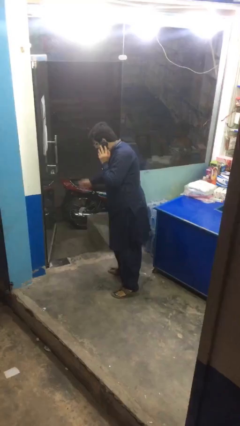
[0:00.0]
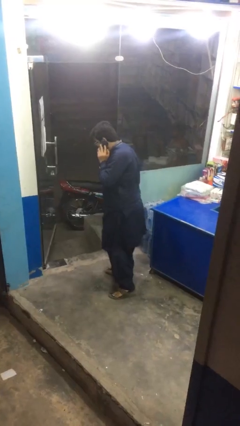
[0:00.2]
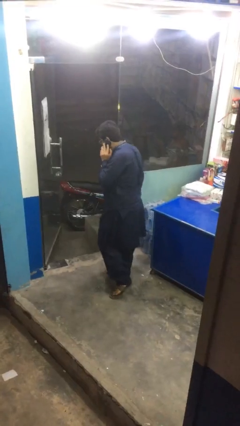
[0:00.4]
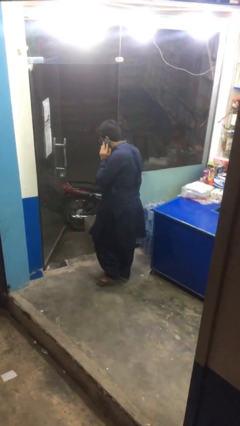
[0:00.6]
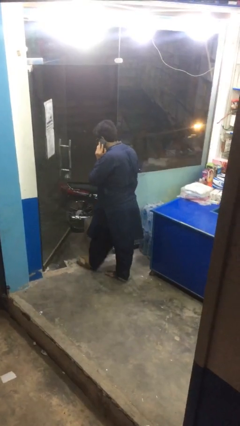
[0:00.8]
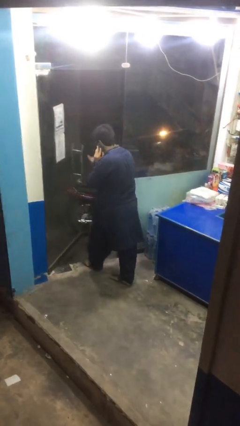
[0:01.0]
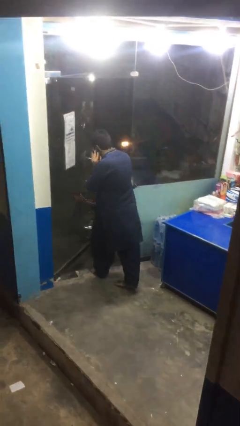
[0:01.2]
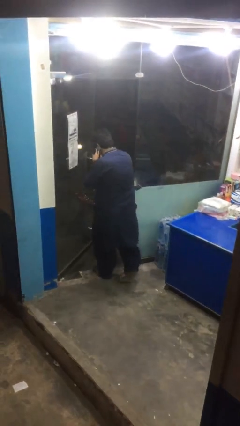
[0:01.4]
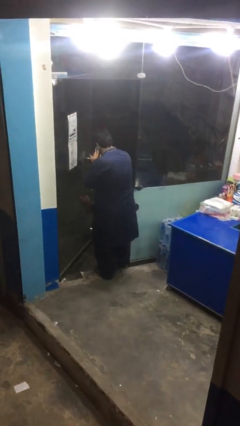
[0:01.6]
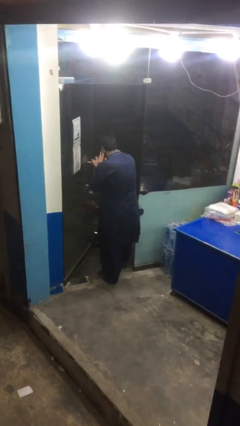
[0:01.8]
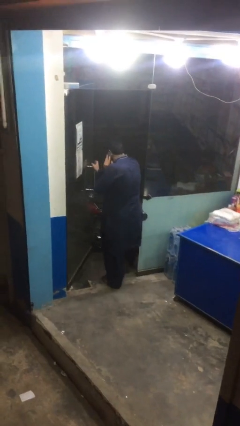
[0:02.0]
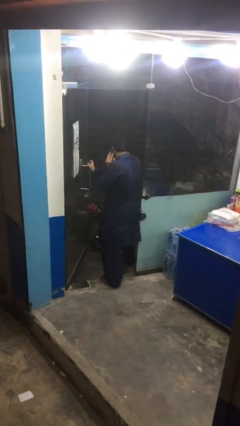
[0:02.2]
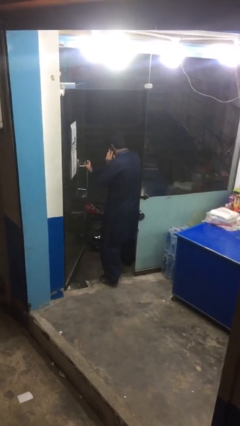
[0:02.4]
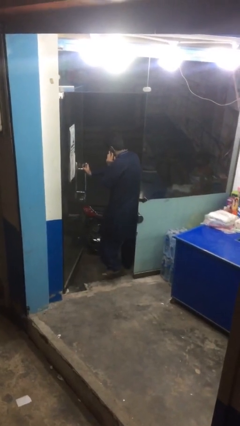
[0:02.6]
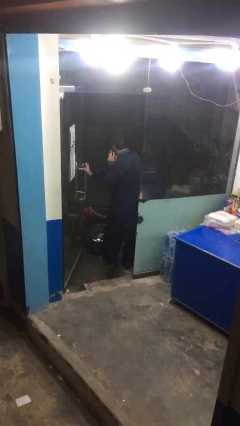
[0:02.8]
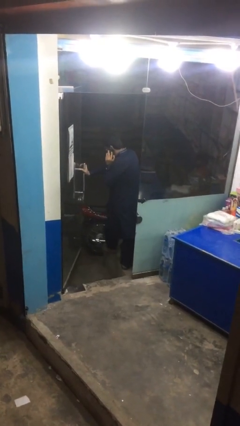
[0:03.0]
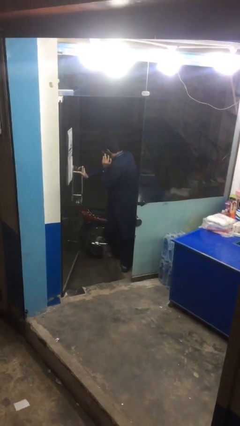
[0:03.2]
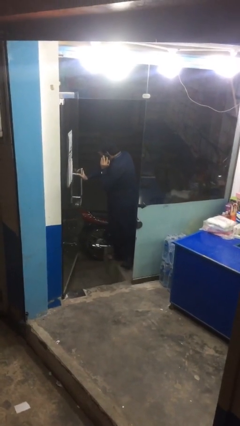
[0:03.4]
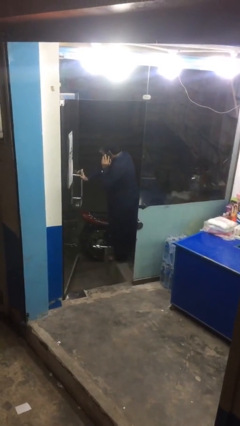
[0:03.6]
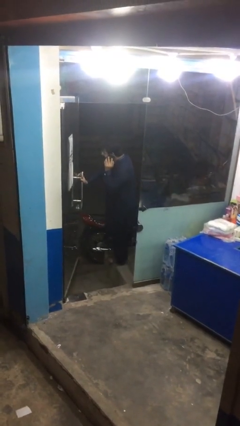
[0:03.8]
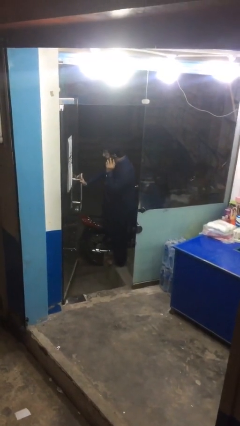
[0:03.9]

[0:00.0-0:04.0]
person exits scene through structure

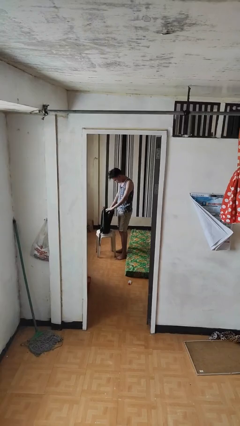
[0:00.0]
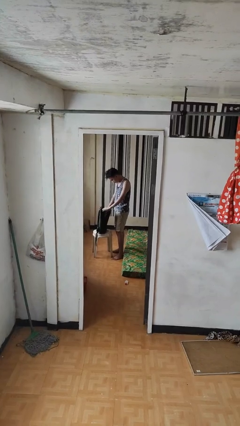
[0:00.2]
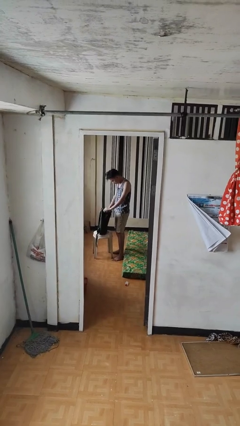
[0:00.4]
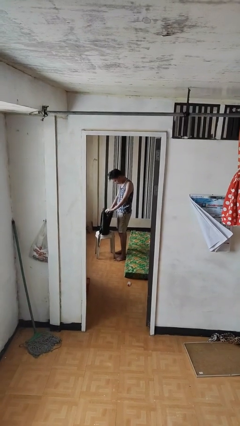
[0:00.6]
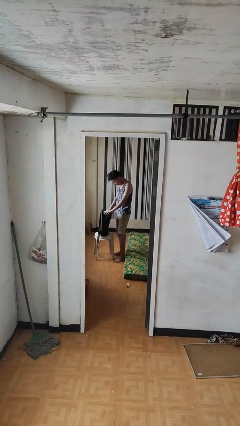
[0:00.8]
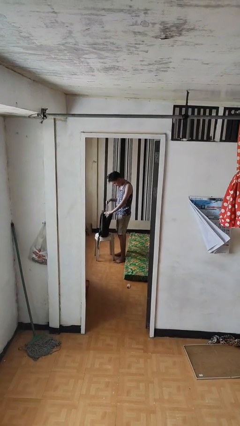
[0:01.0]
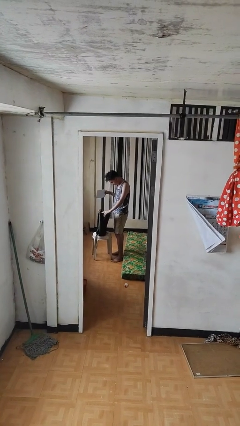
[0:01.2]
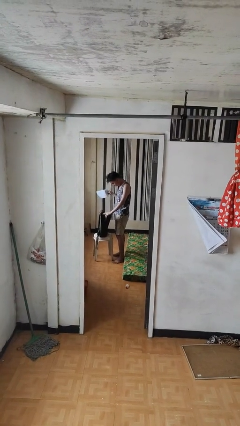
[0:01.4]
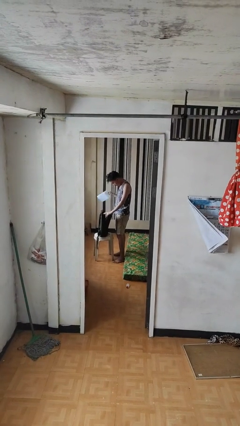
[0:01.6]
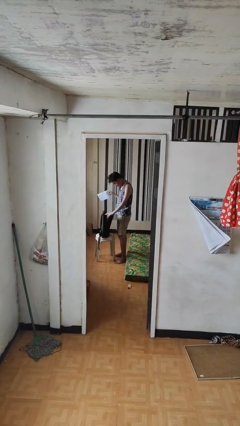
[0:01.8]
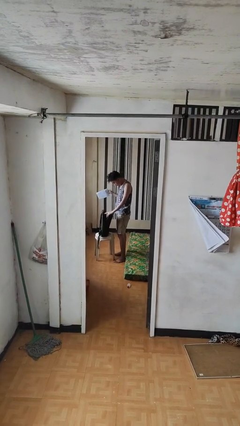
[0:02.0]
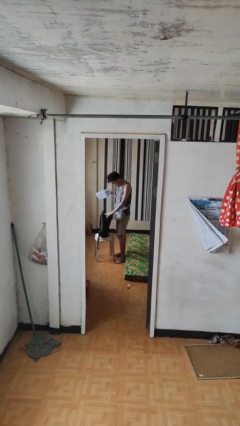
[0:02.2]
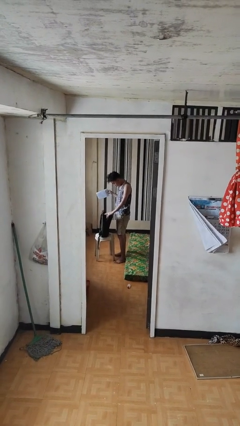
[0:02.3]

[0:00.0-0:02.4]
person takes object from backpack

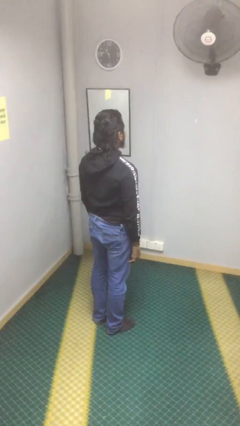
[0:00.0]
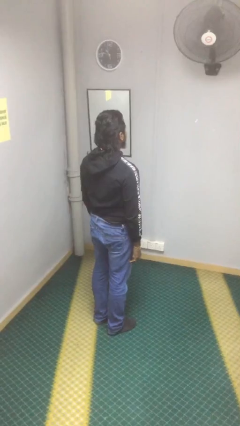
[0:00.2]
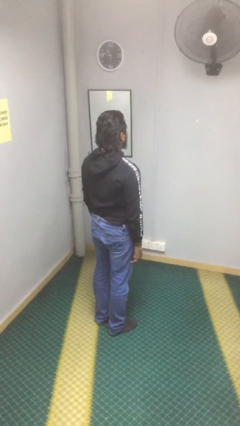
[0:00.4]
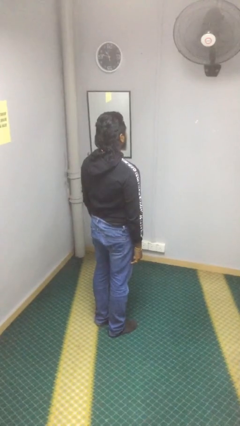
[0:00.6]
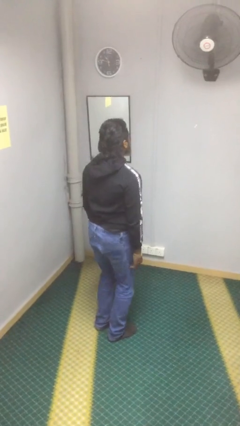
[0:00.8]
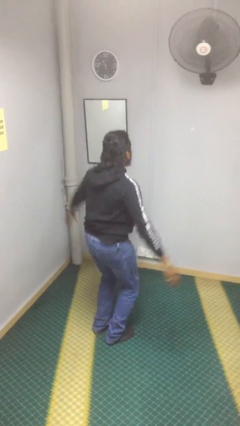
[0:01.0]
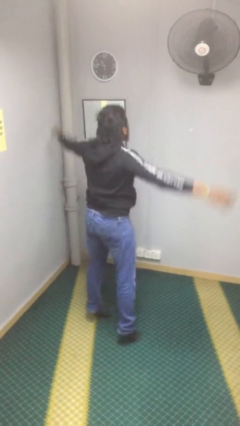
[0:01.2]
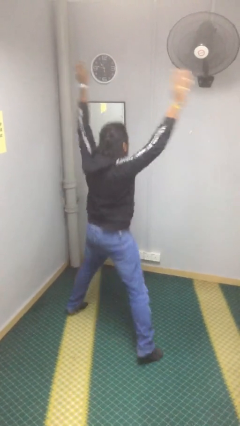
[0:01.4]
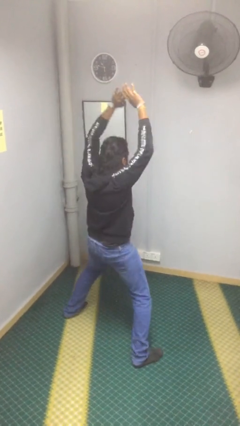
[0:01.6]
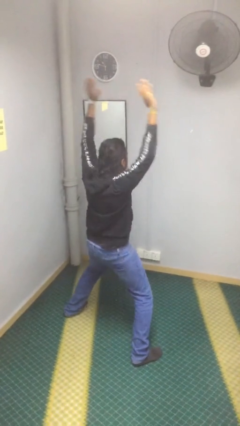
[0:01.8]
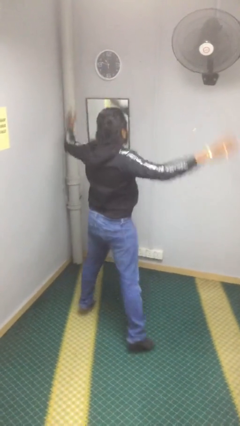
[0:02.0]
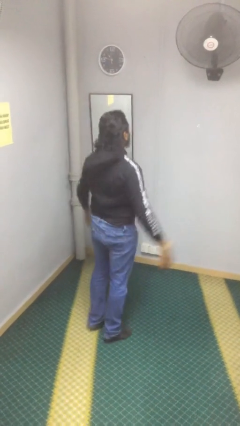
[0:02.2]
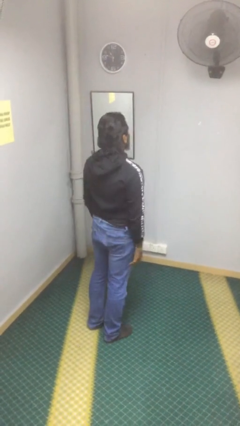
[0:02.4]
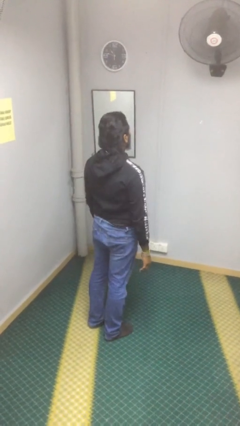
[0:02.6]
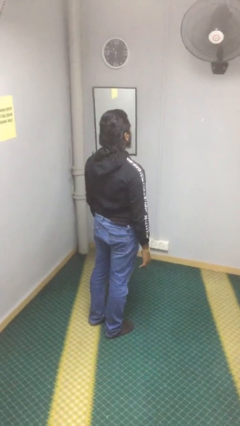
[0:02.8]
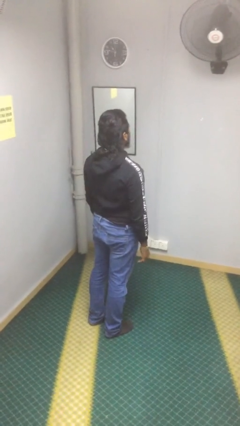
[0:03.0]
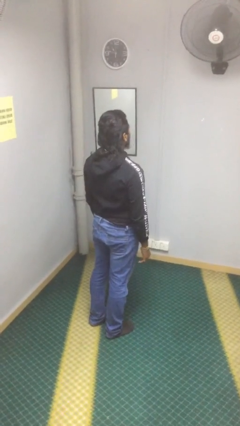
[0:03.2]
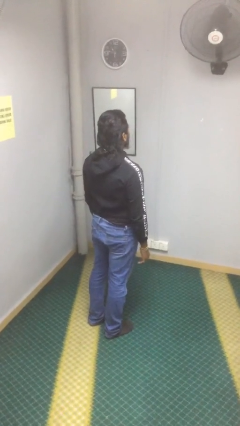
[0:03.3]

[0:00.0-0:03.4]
person exercises with jumping jacks

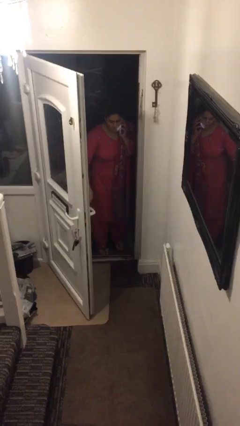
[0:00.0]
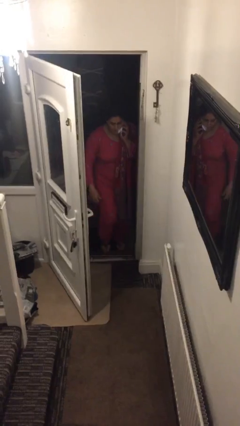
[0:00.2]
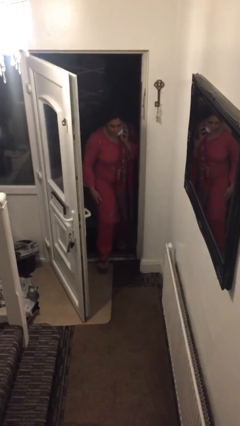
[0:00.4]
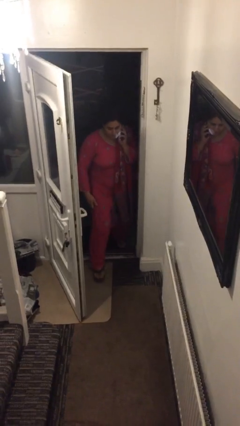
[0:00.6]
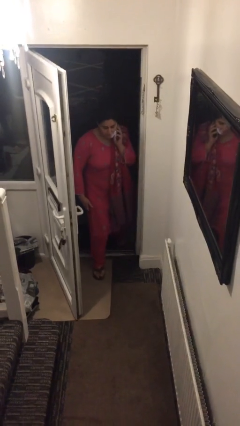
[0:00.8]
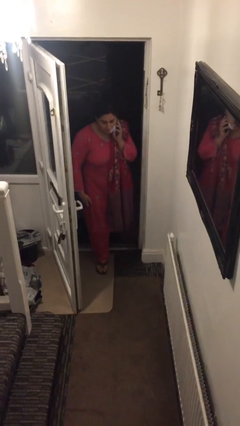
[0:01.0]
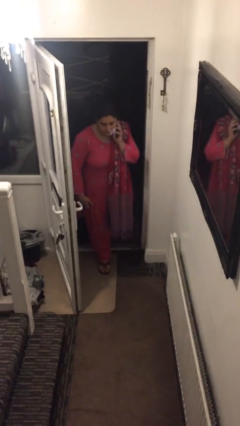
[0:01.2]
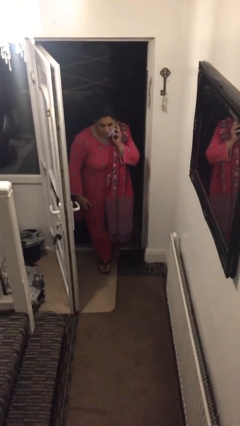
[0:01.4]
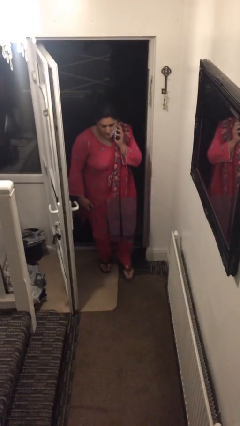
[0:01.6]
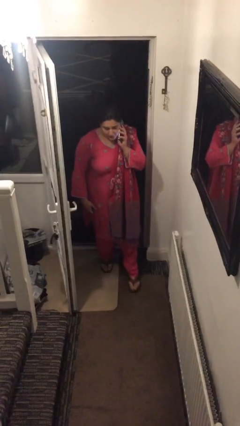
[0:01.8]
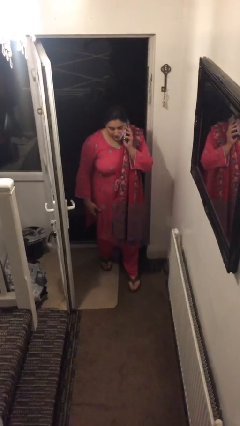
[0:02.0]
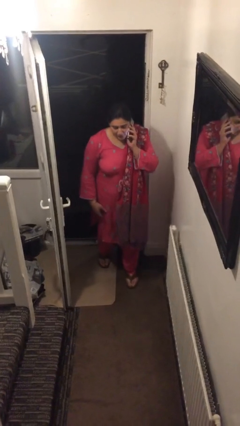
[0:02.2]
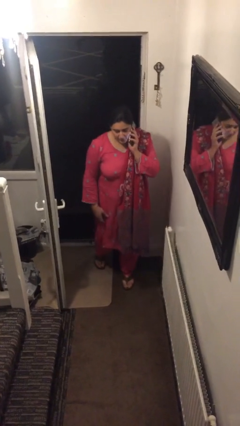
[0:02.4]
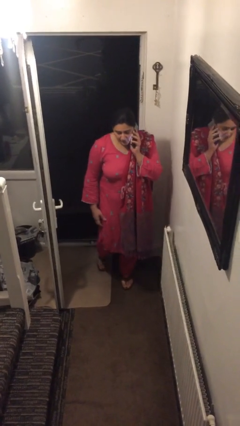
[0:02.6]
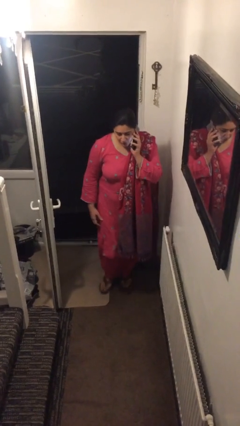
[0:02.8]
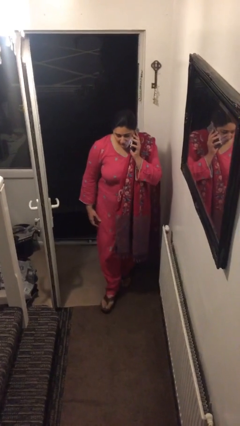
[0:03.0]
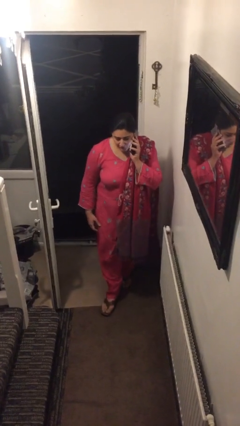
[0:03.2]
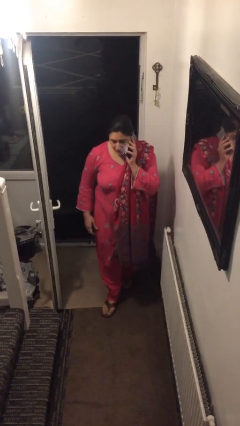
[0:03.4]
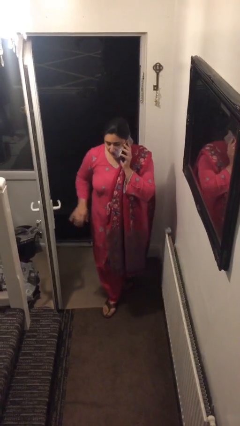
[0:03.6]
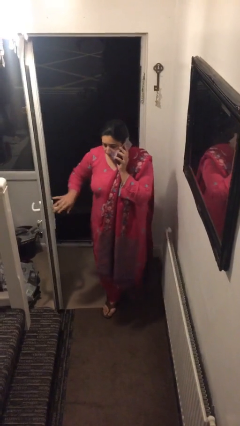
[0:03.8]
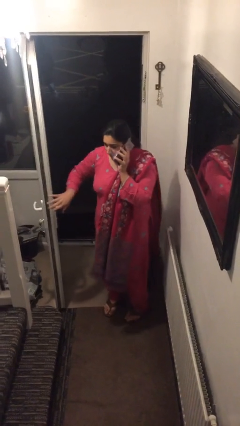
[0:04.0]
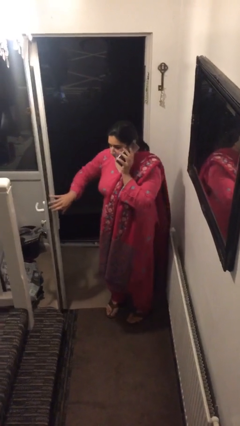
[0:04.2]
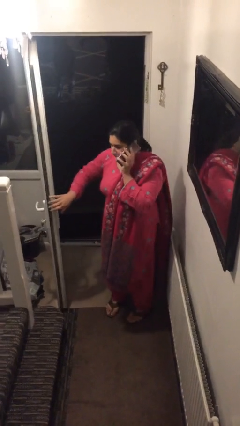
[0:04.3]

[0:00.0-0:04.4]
person enters scene through structure

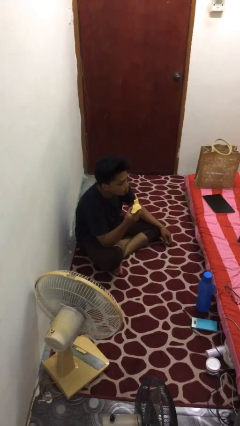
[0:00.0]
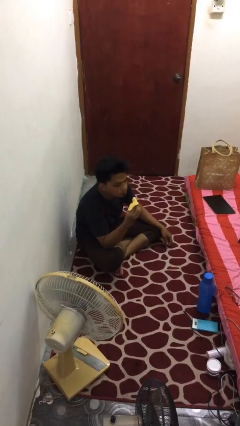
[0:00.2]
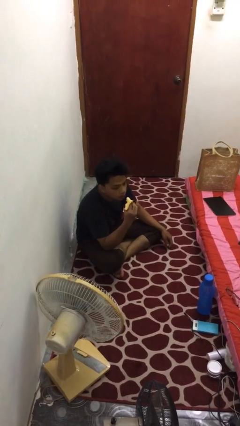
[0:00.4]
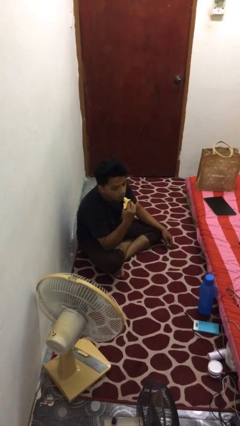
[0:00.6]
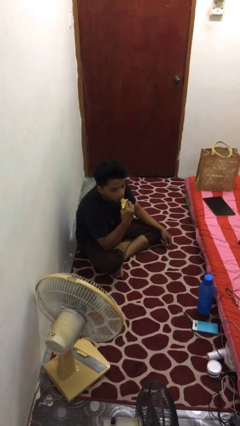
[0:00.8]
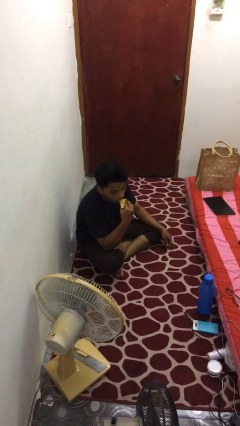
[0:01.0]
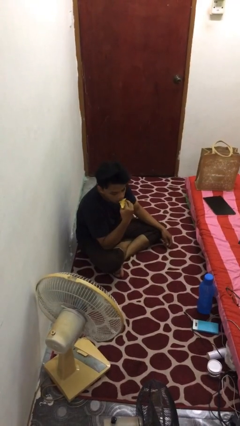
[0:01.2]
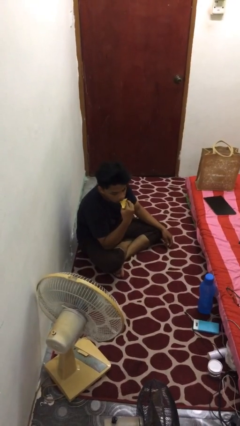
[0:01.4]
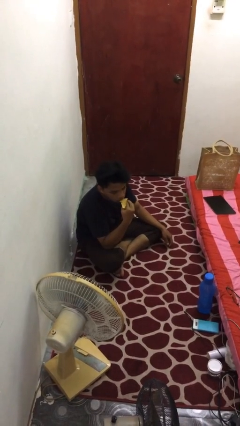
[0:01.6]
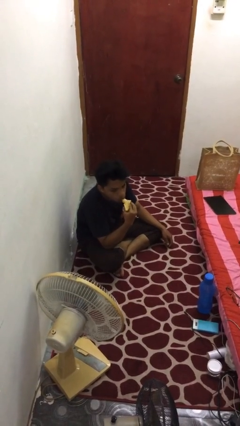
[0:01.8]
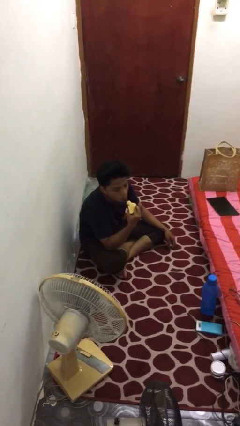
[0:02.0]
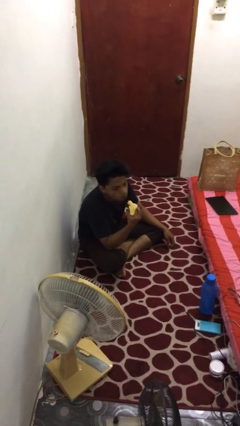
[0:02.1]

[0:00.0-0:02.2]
person eats banana

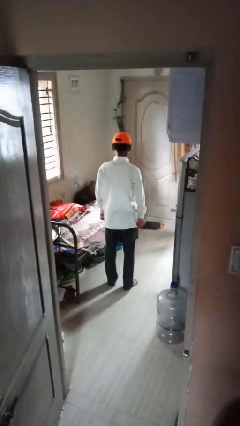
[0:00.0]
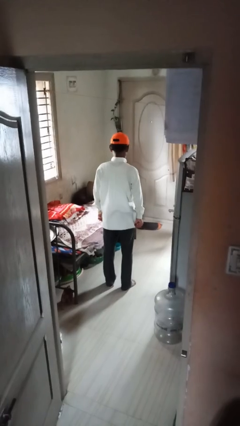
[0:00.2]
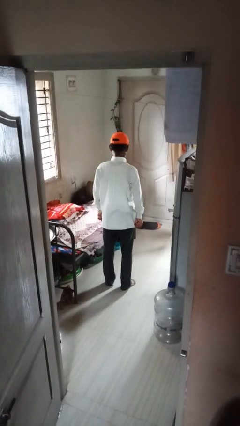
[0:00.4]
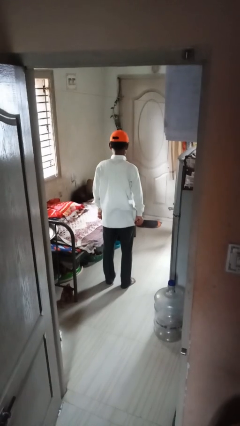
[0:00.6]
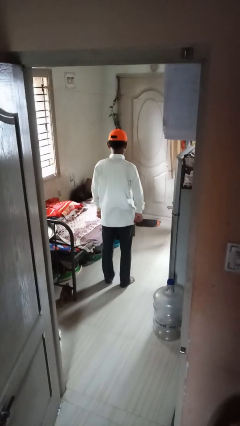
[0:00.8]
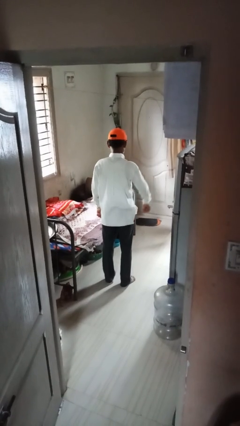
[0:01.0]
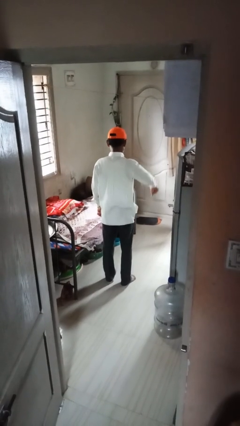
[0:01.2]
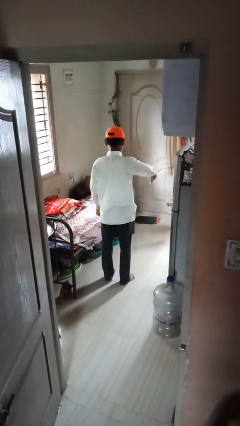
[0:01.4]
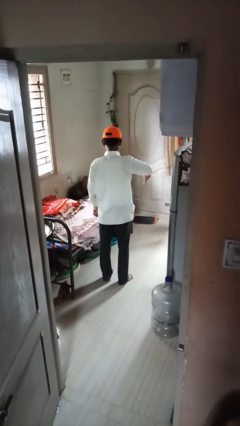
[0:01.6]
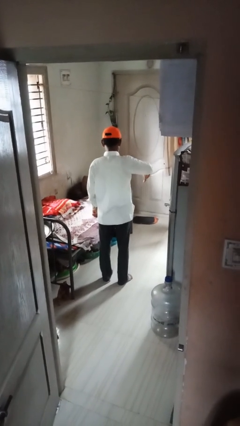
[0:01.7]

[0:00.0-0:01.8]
person gestures thumbs down
